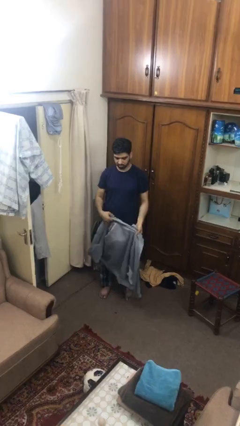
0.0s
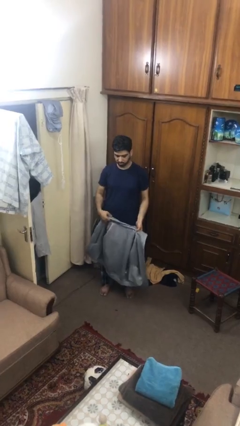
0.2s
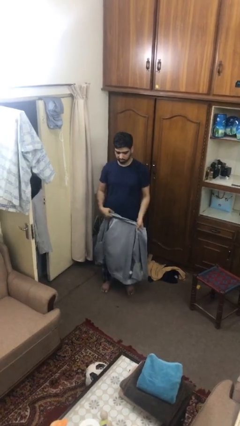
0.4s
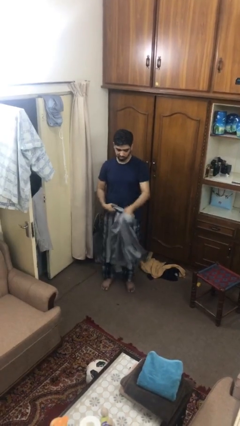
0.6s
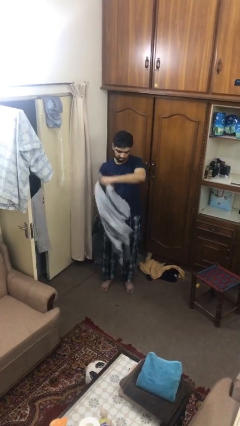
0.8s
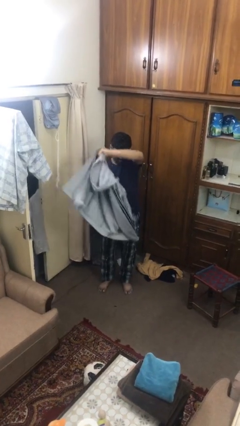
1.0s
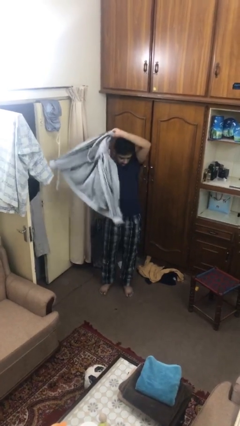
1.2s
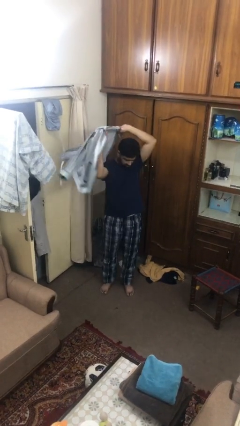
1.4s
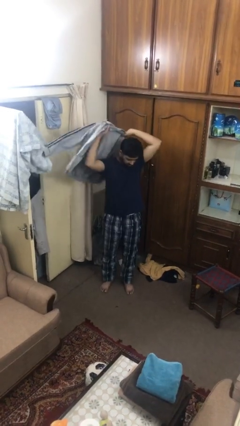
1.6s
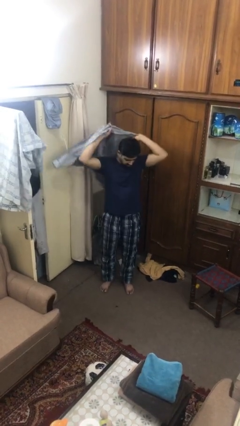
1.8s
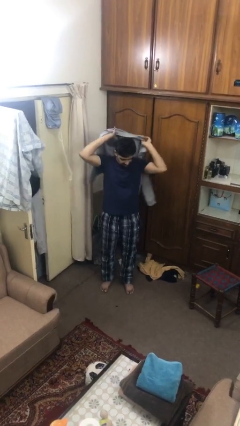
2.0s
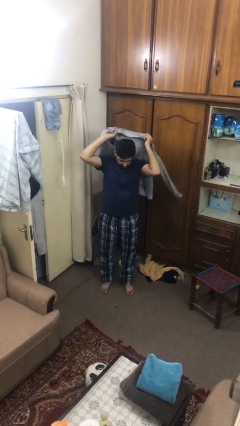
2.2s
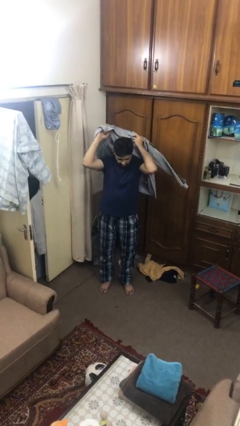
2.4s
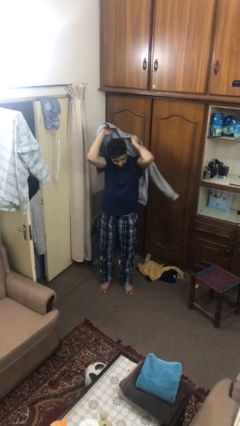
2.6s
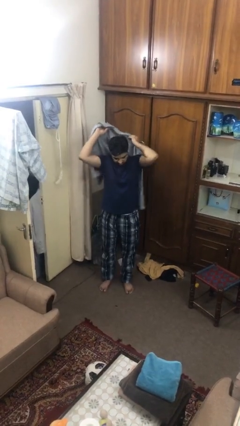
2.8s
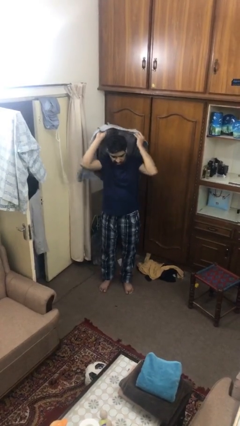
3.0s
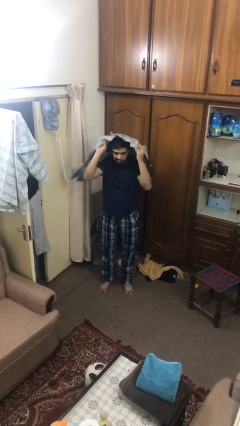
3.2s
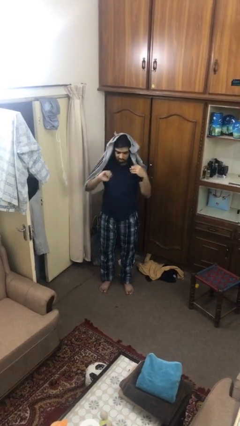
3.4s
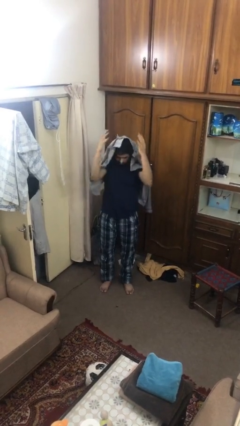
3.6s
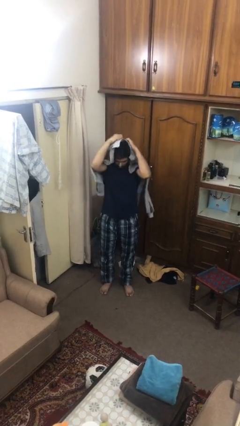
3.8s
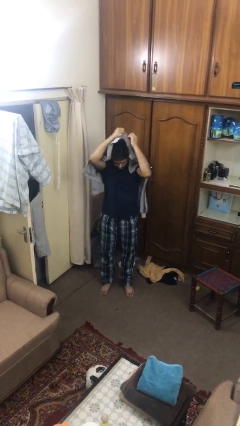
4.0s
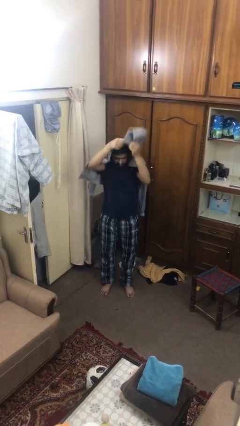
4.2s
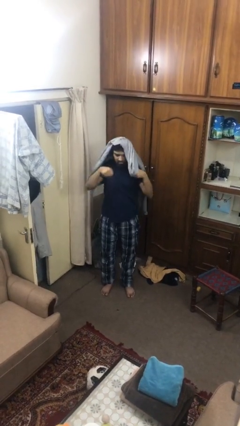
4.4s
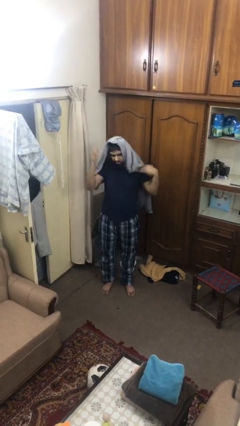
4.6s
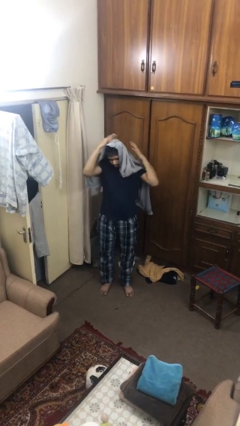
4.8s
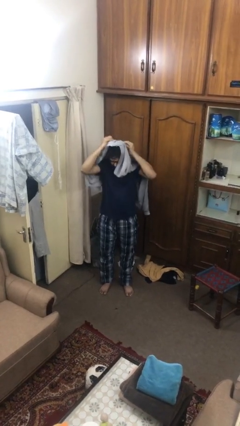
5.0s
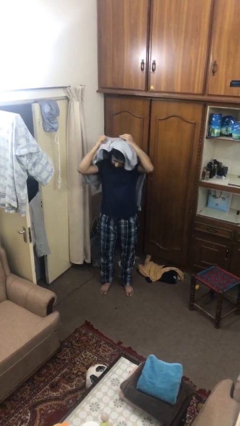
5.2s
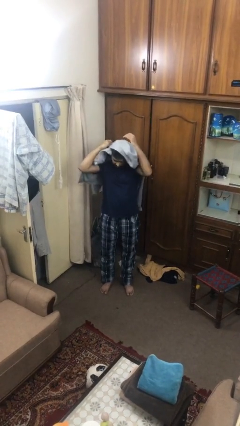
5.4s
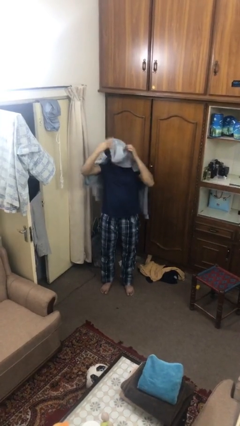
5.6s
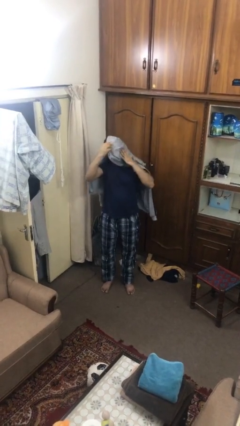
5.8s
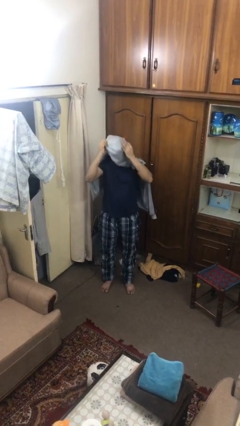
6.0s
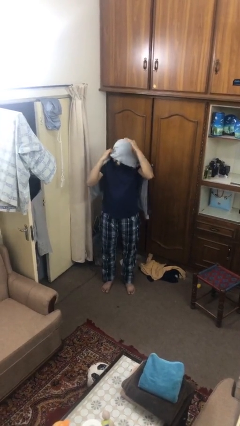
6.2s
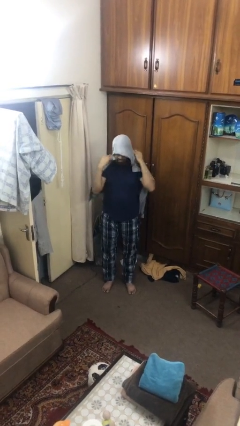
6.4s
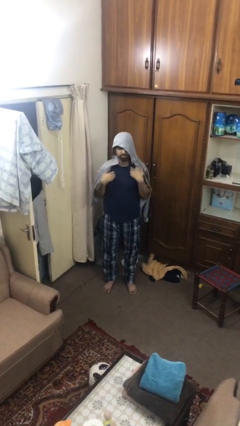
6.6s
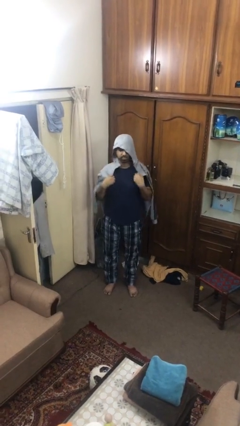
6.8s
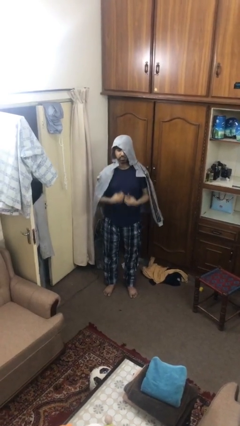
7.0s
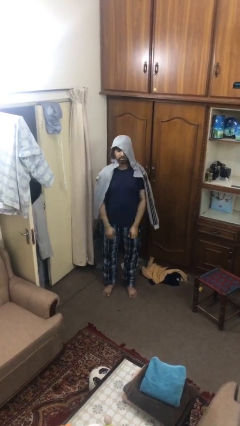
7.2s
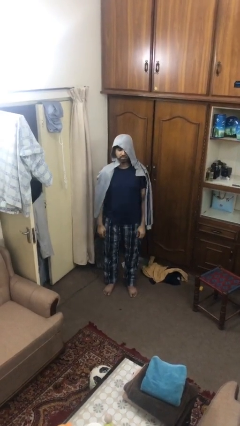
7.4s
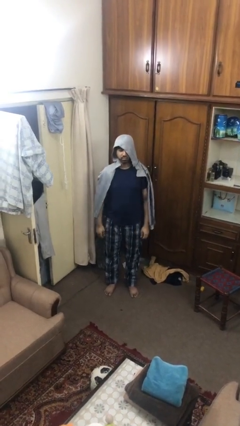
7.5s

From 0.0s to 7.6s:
person puts on hoodie

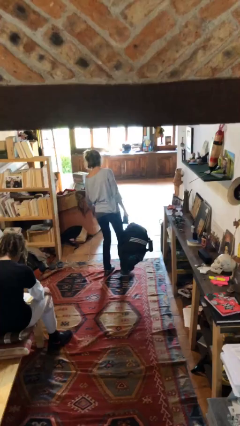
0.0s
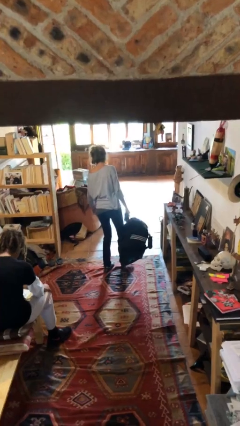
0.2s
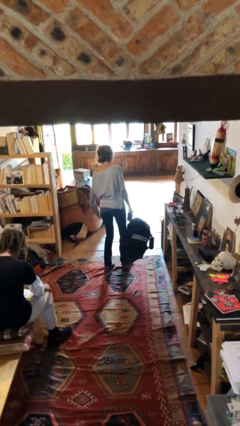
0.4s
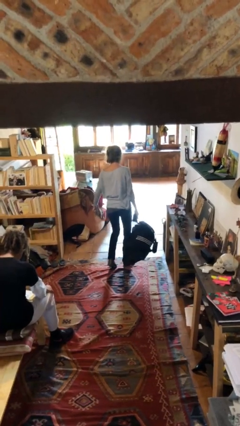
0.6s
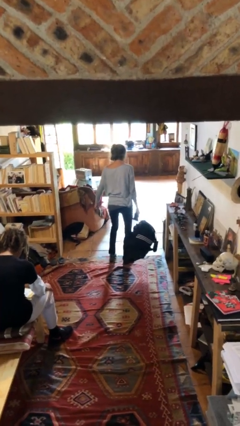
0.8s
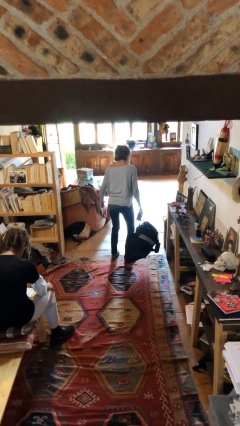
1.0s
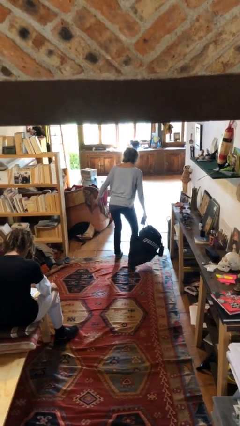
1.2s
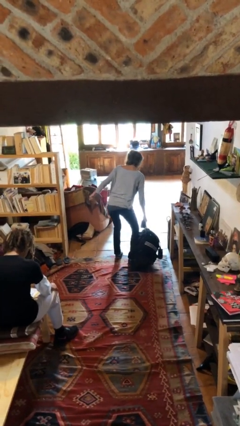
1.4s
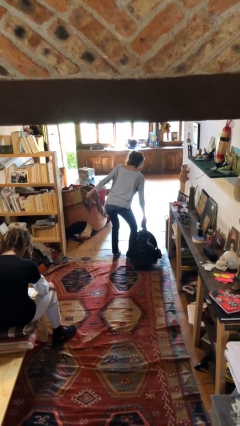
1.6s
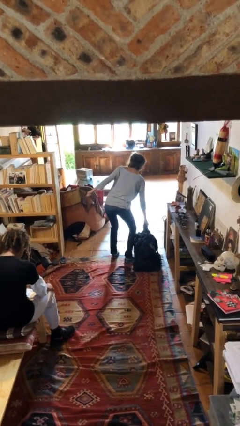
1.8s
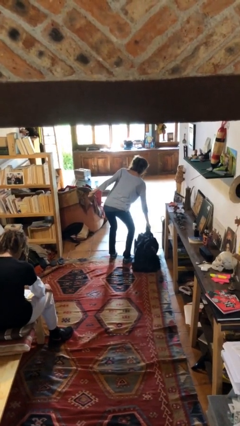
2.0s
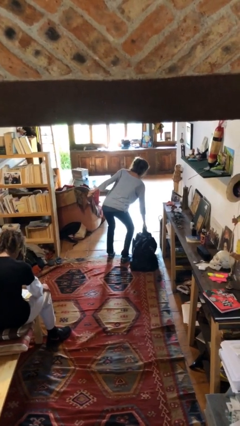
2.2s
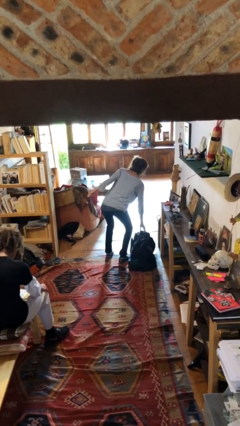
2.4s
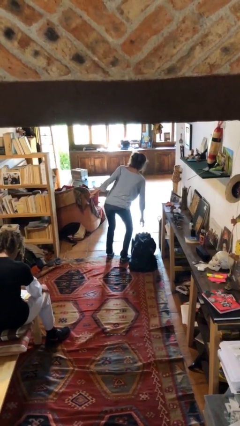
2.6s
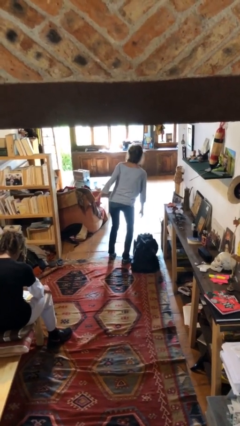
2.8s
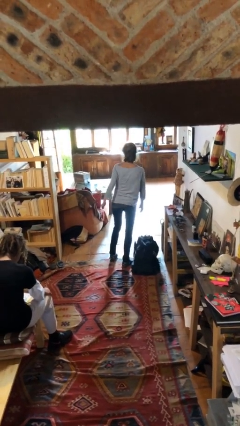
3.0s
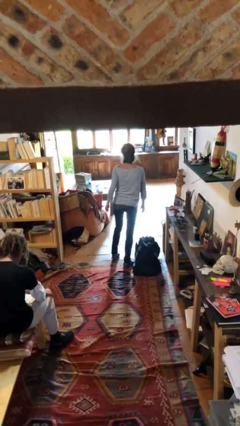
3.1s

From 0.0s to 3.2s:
person puts down object on floor

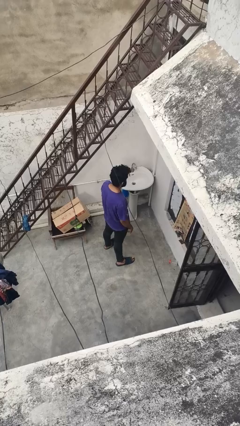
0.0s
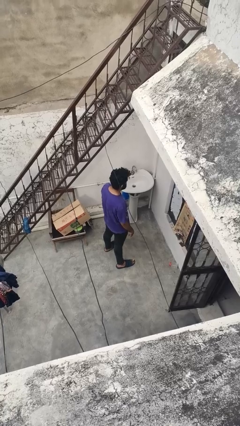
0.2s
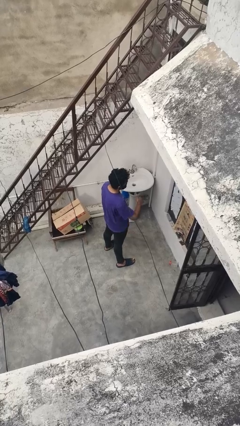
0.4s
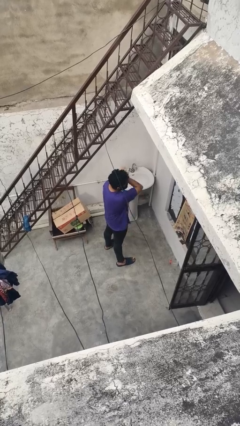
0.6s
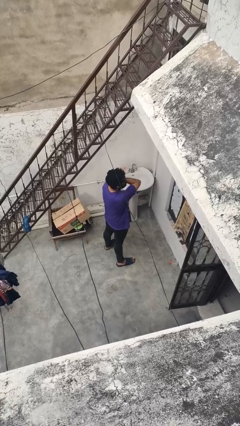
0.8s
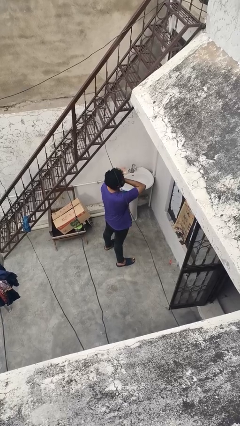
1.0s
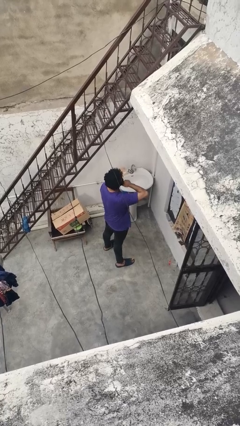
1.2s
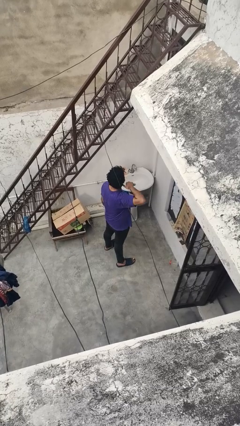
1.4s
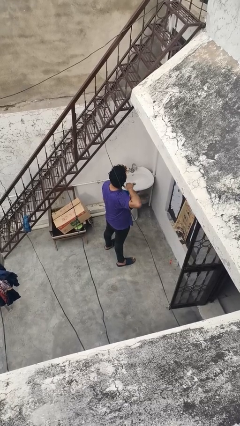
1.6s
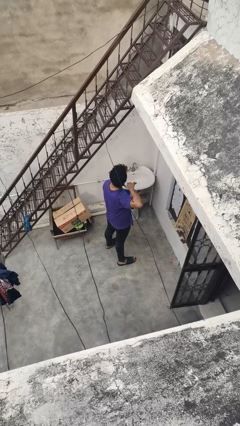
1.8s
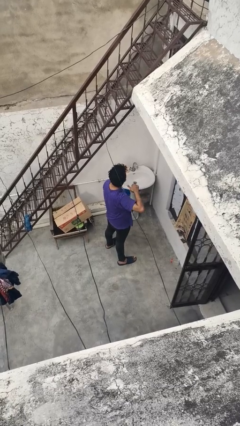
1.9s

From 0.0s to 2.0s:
person gestures cut

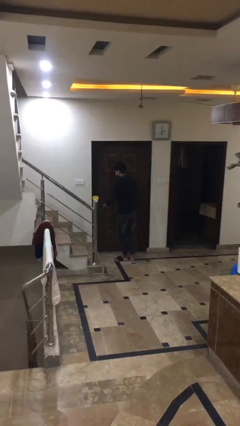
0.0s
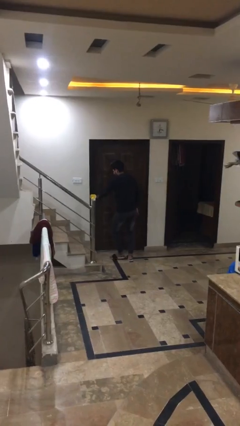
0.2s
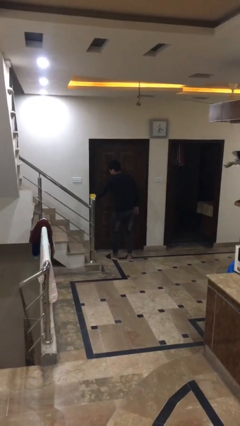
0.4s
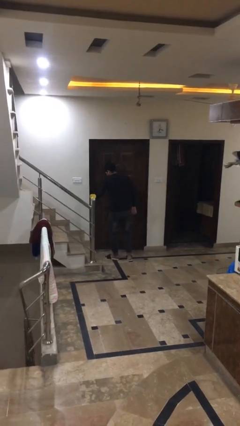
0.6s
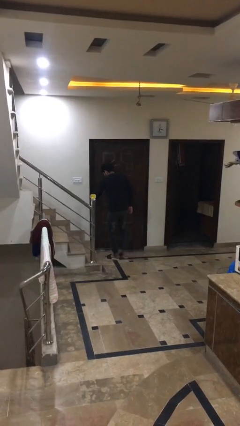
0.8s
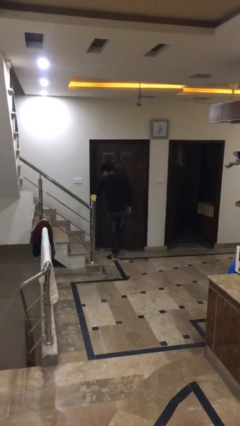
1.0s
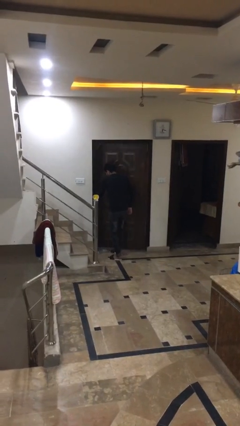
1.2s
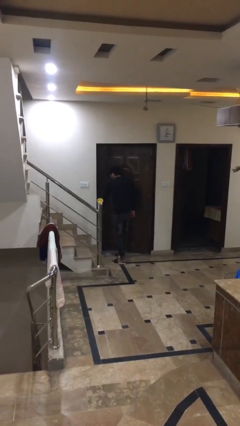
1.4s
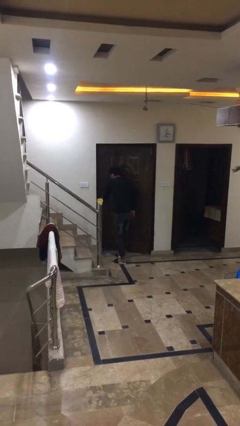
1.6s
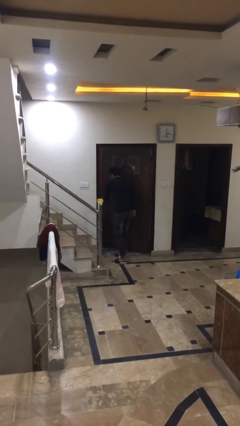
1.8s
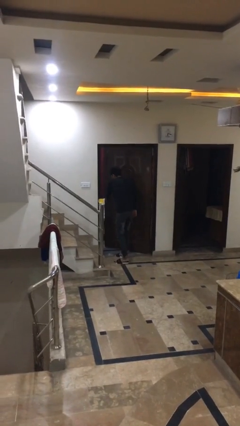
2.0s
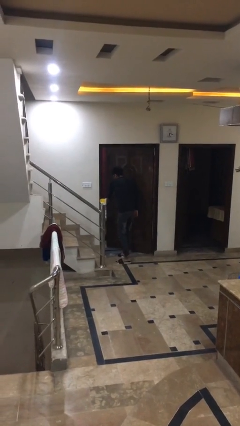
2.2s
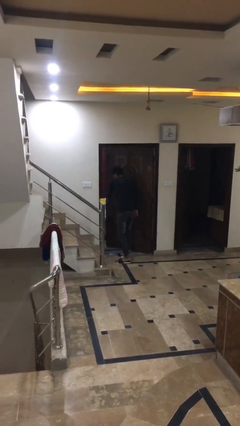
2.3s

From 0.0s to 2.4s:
person opens facility door

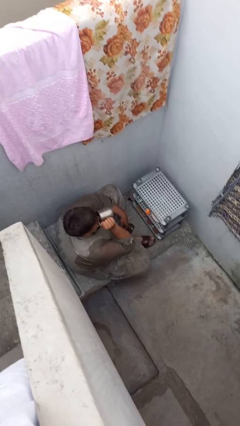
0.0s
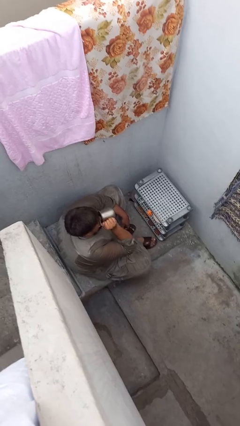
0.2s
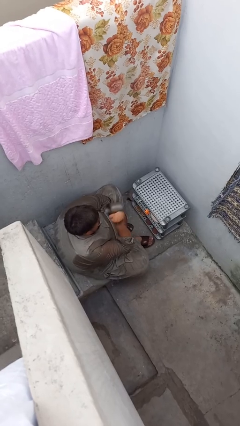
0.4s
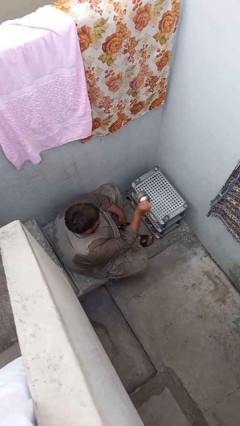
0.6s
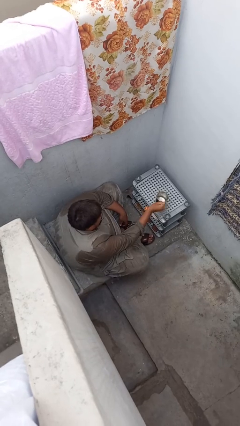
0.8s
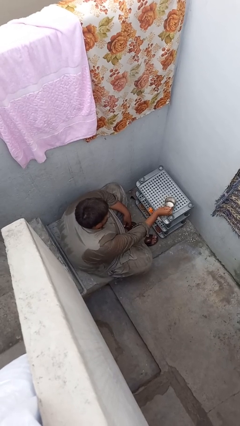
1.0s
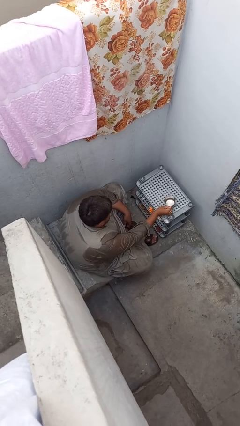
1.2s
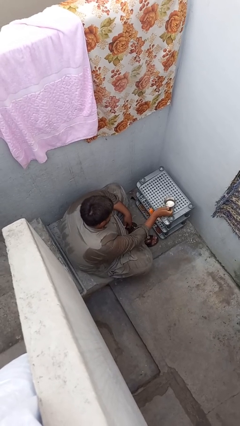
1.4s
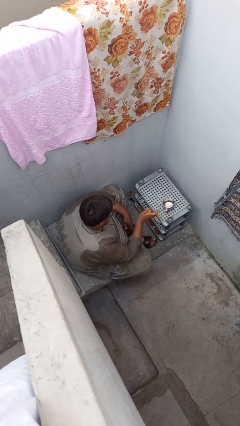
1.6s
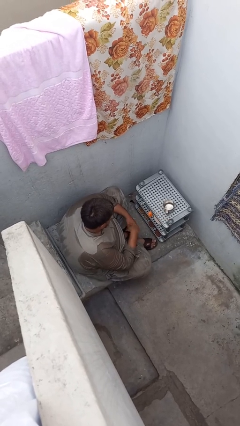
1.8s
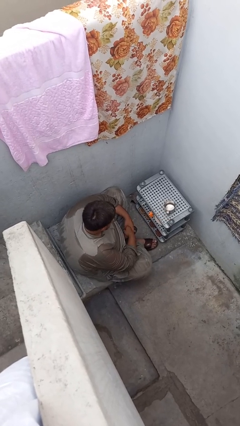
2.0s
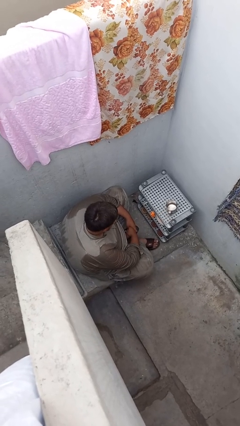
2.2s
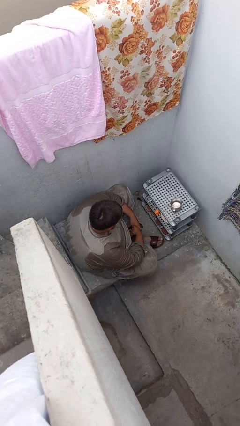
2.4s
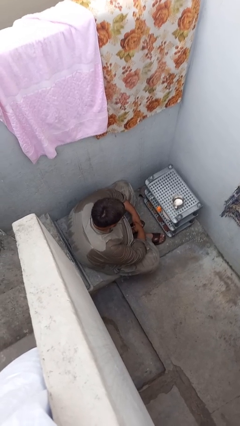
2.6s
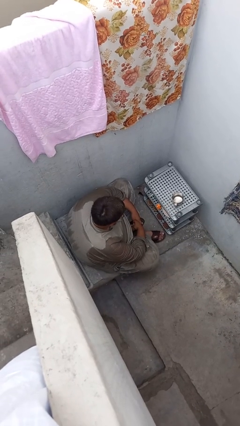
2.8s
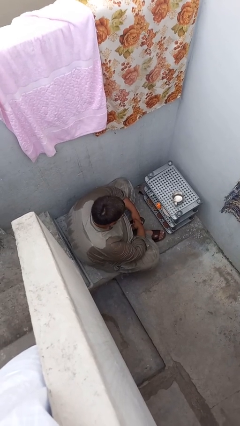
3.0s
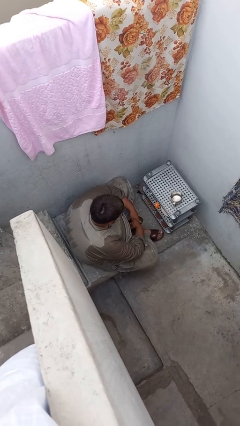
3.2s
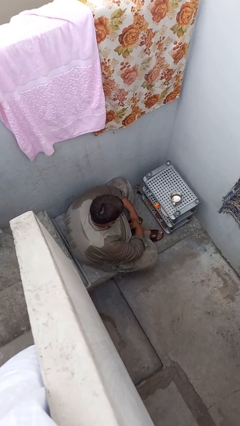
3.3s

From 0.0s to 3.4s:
person puts down object on table
